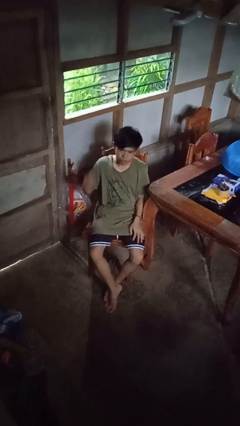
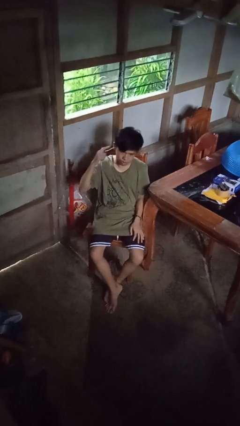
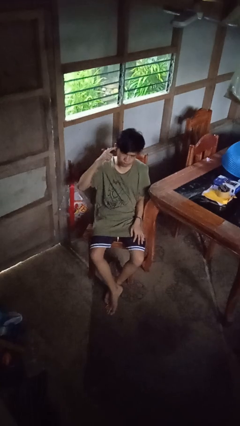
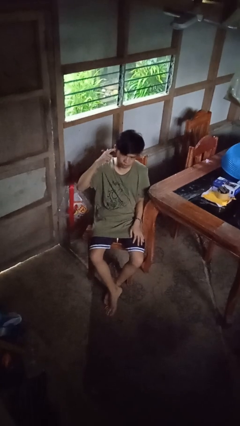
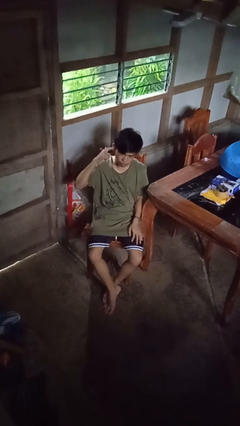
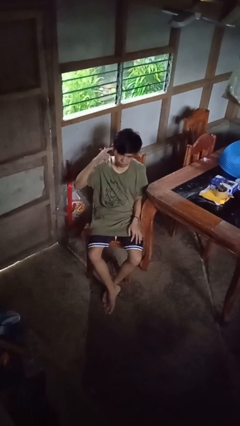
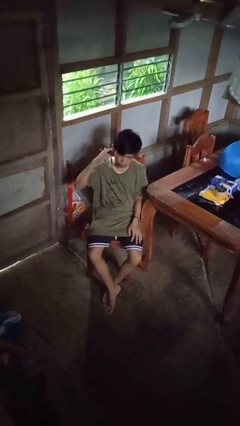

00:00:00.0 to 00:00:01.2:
person gestures listen closely

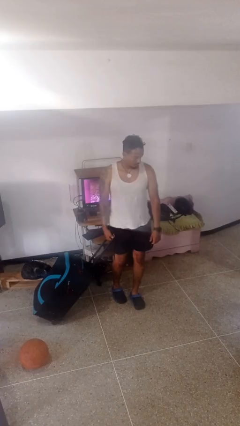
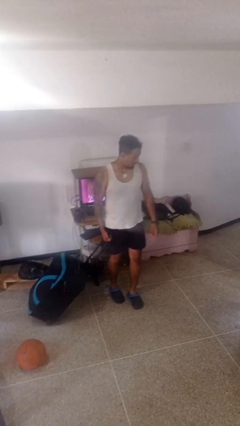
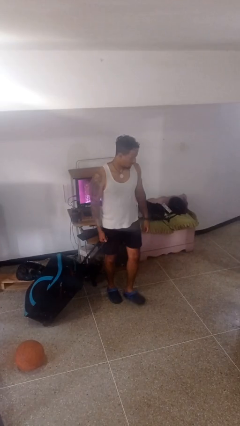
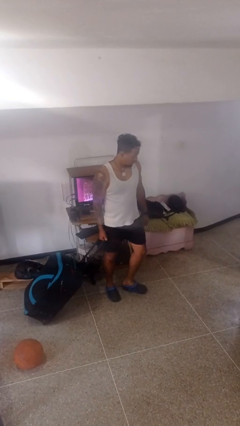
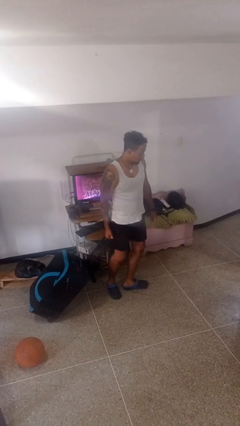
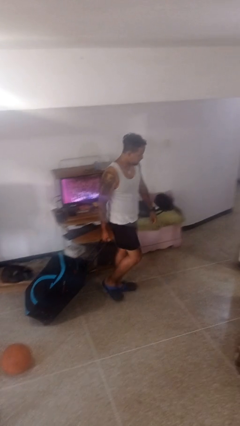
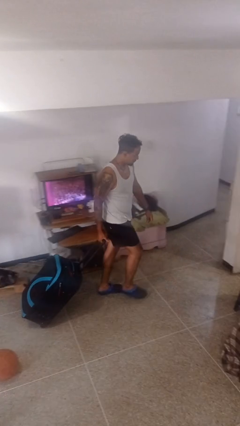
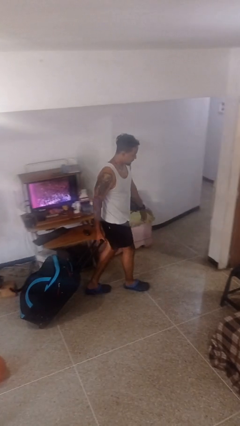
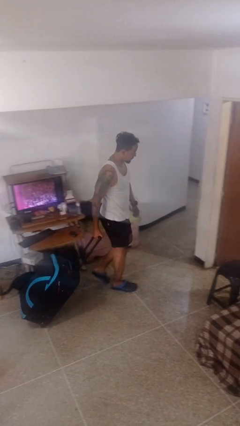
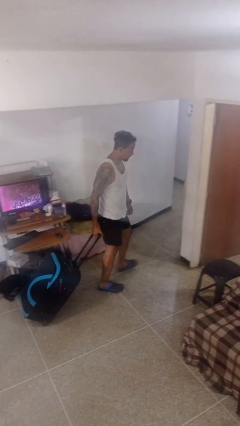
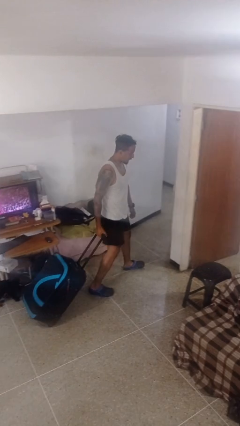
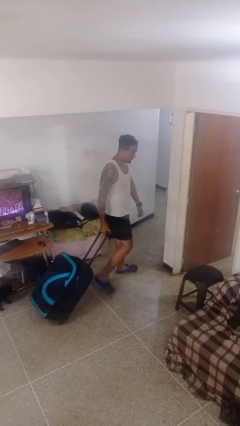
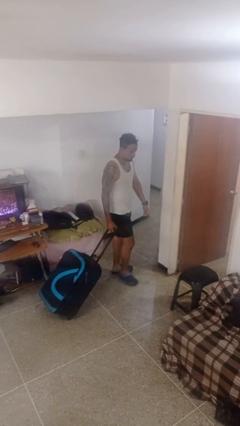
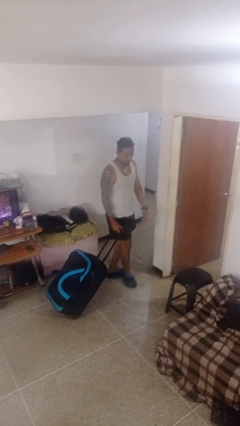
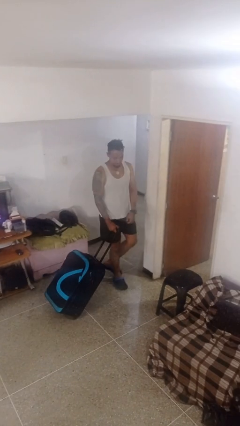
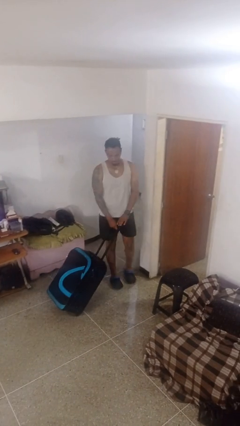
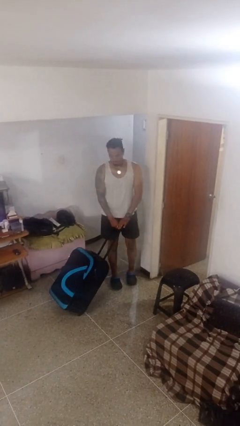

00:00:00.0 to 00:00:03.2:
person pulls wheeled cart

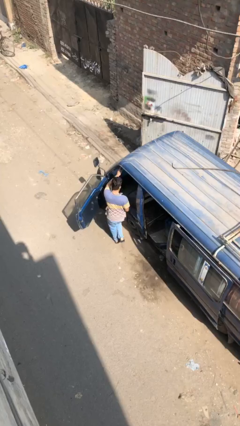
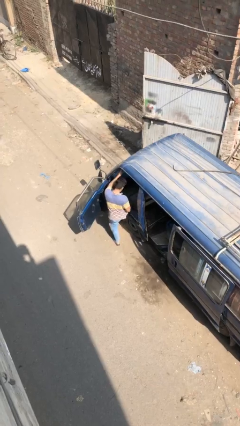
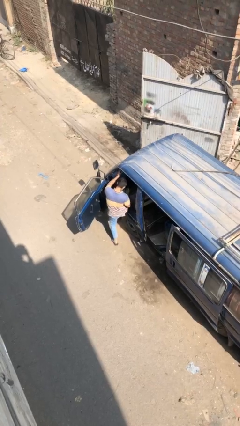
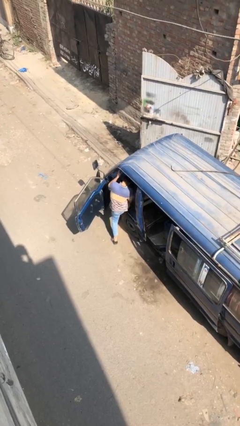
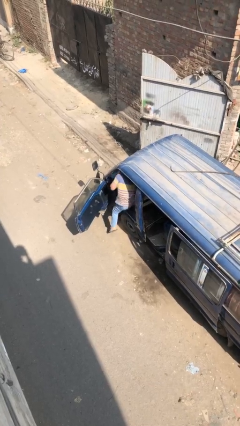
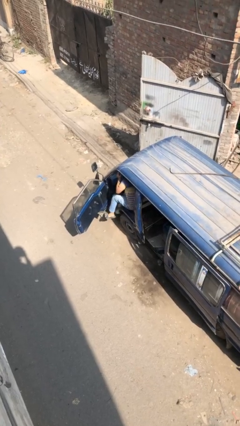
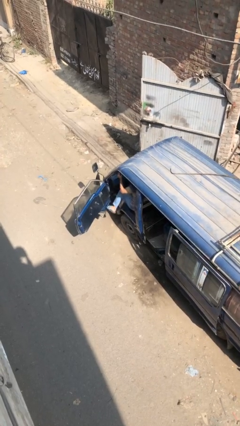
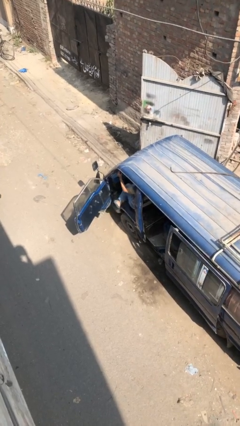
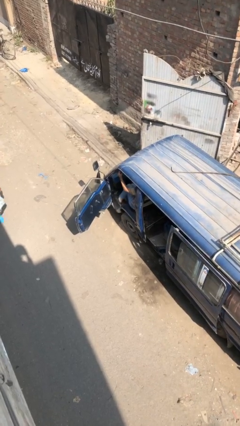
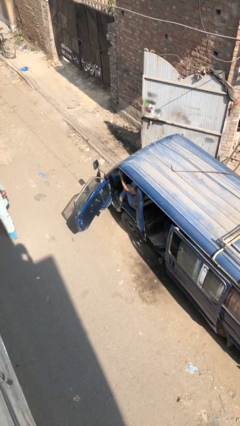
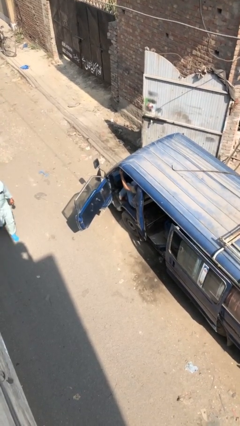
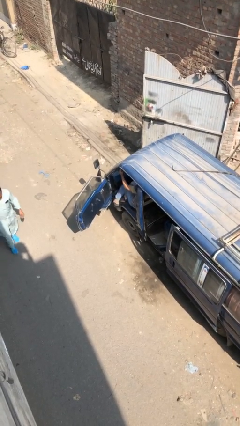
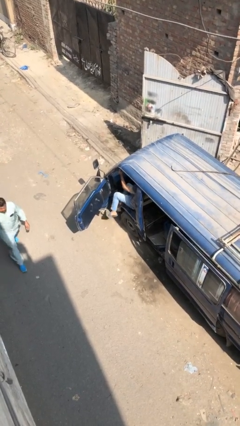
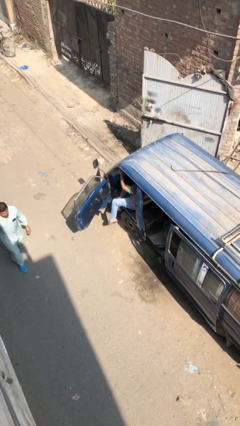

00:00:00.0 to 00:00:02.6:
person enters car

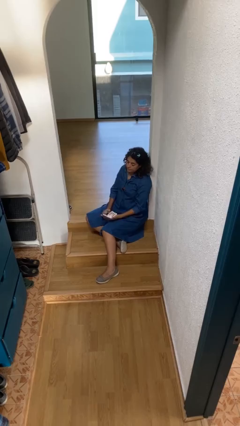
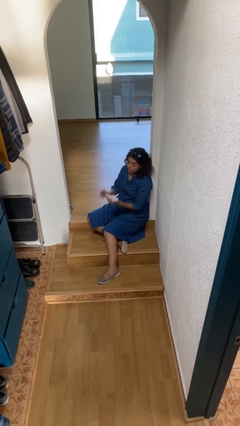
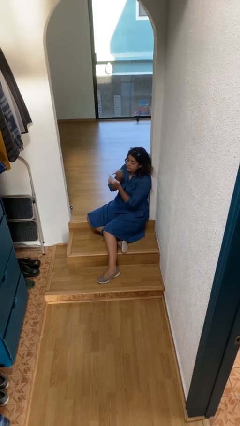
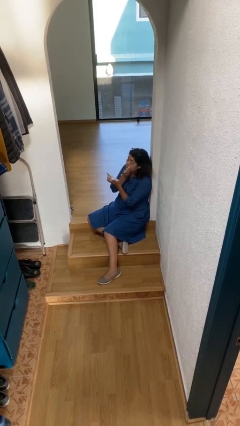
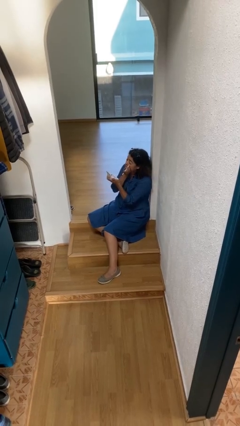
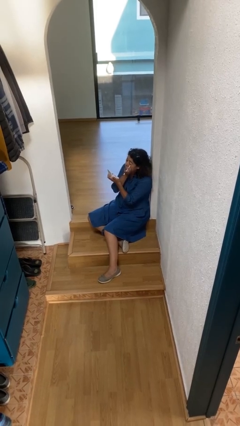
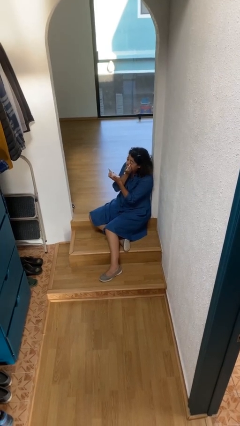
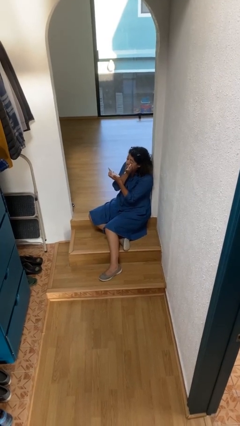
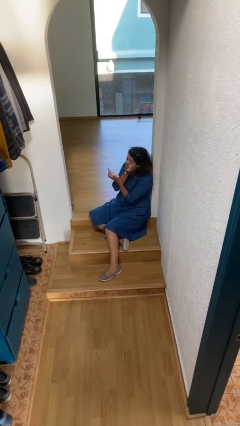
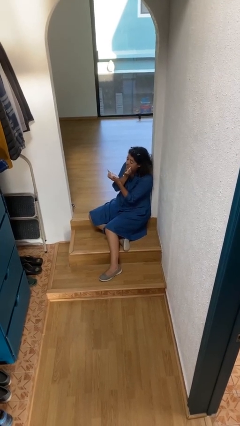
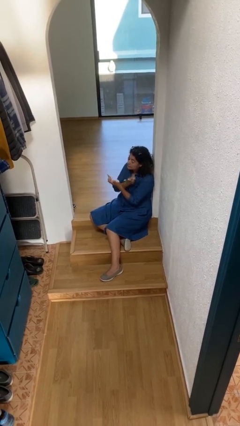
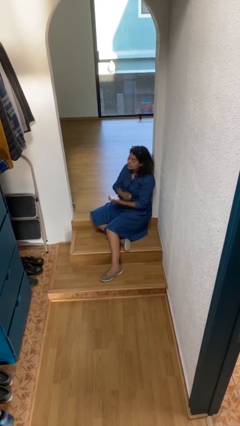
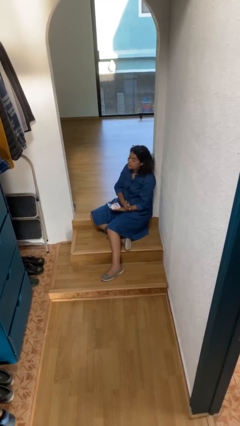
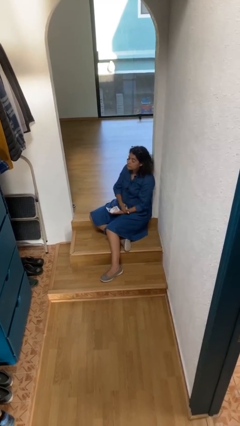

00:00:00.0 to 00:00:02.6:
person applies eye makeup

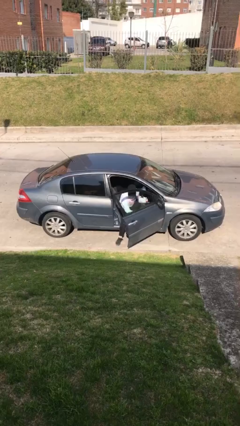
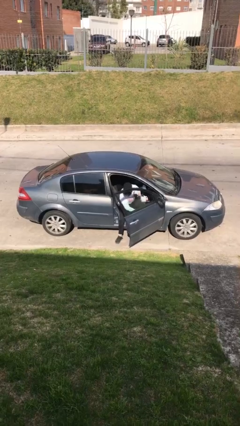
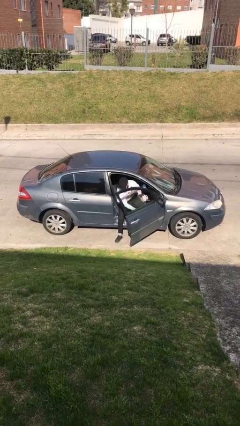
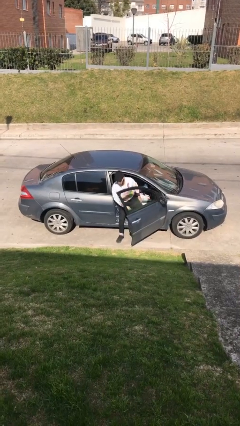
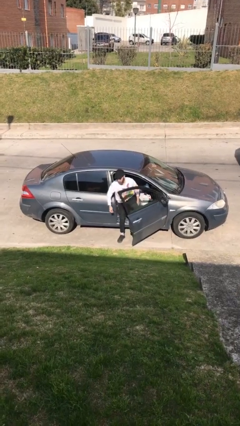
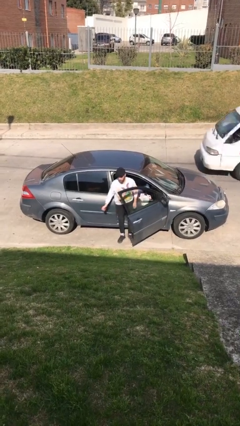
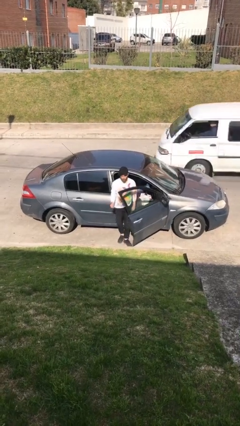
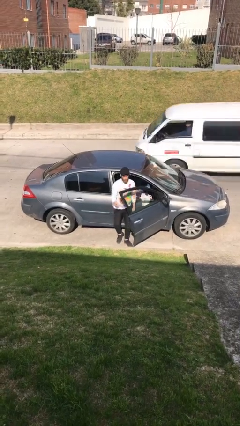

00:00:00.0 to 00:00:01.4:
person exits car

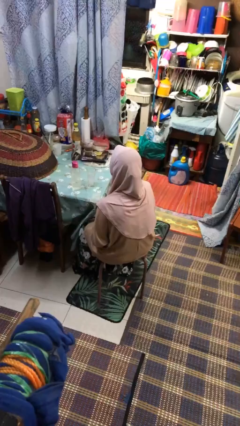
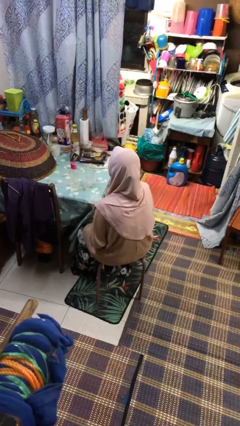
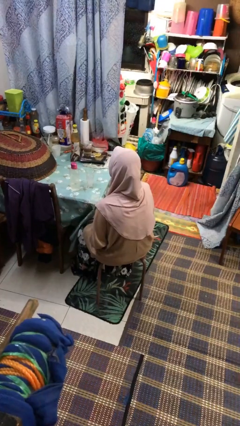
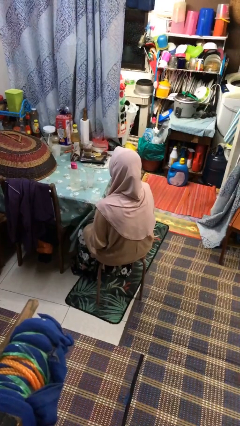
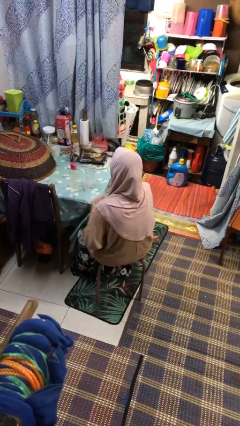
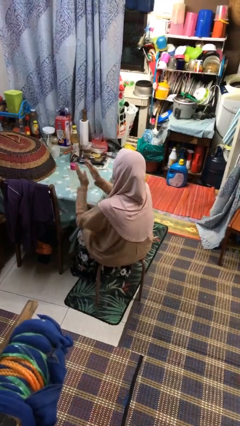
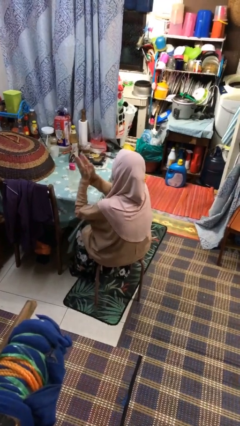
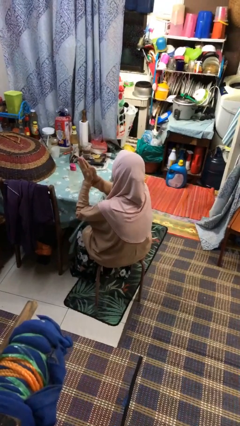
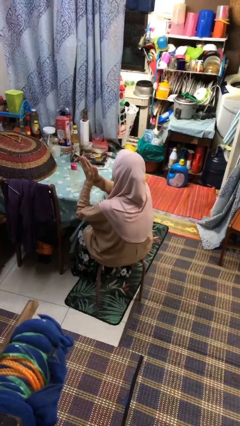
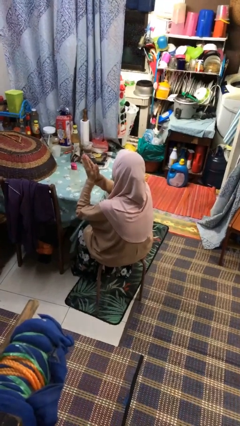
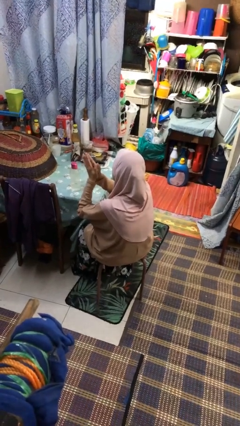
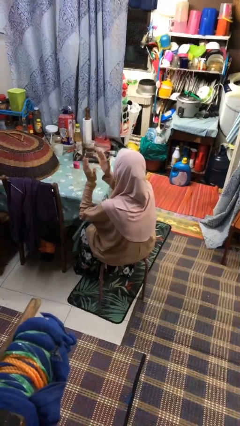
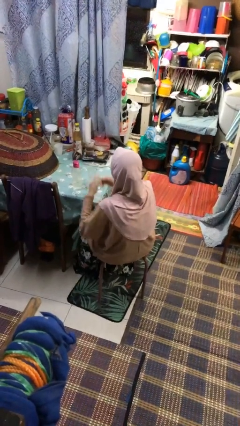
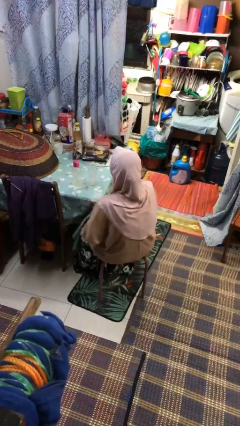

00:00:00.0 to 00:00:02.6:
person claps hands

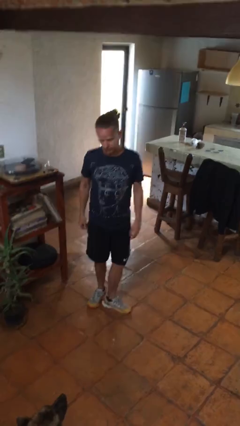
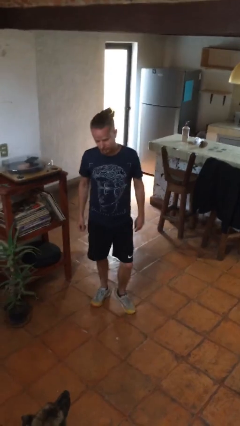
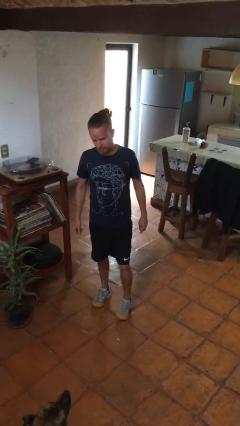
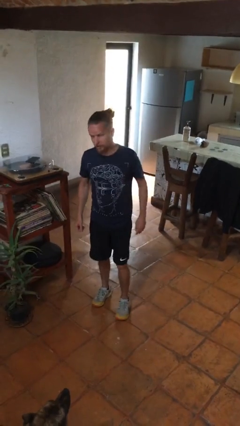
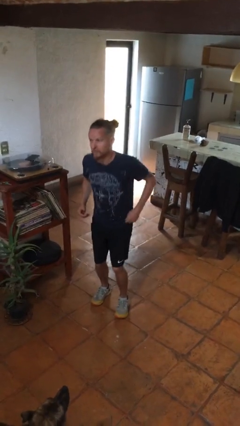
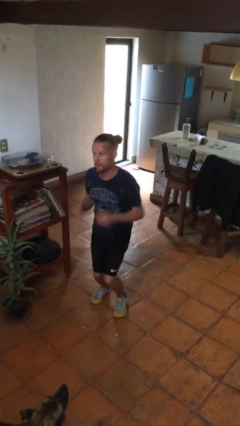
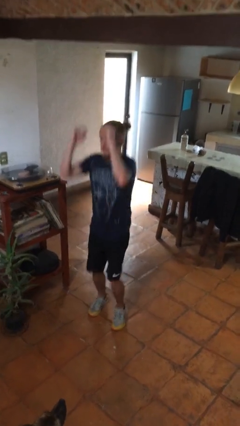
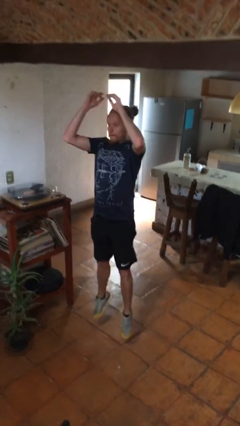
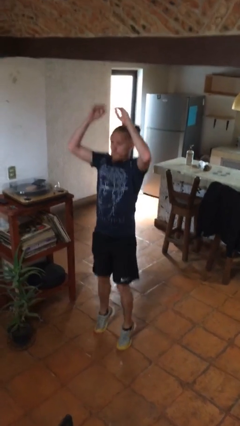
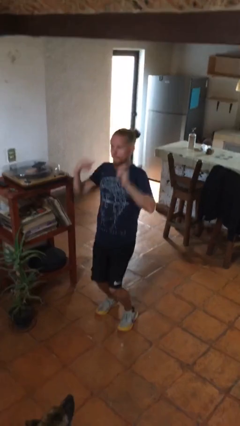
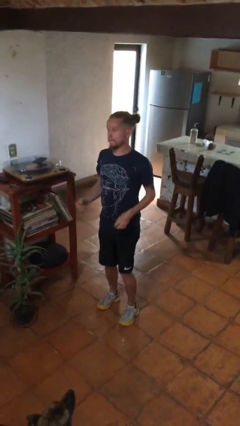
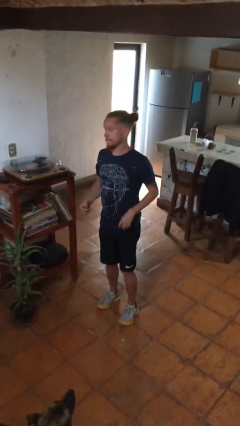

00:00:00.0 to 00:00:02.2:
person jumps

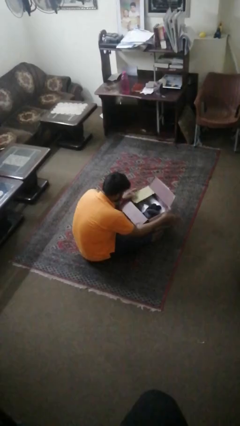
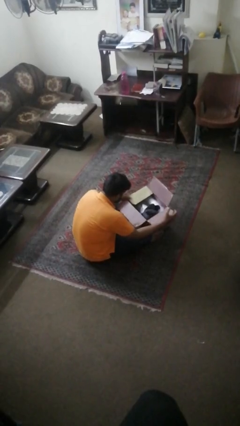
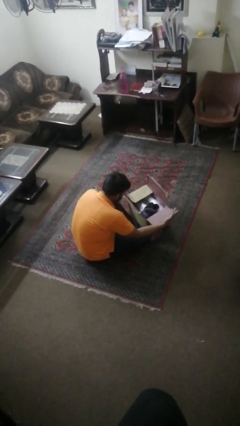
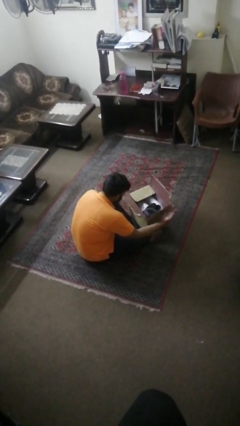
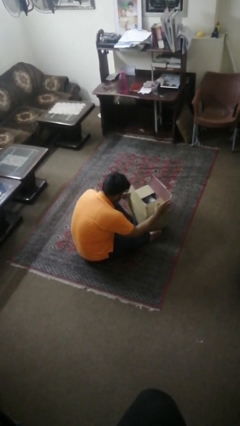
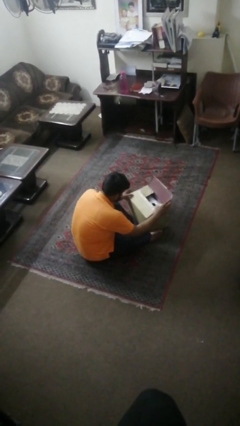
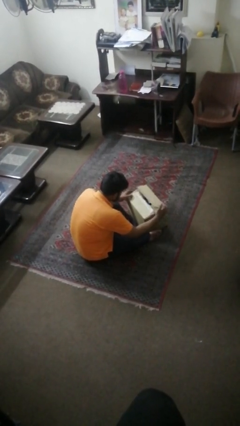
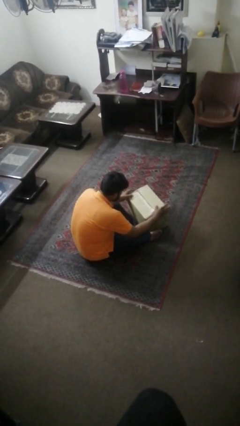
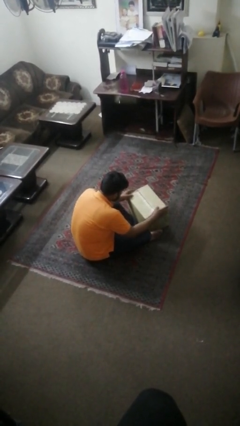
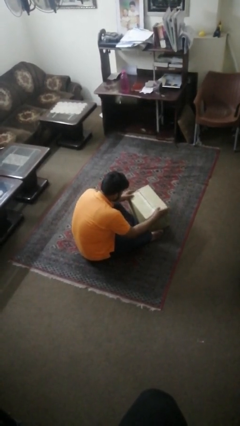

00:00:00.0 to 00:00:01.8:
person closes box
